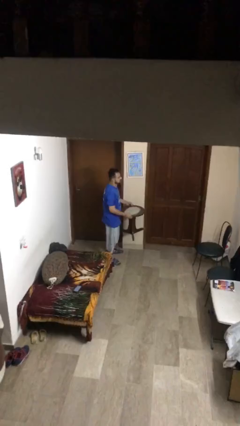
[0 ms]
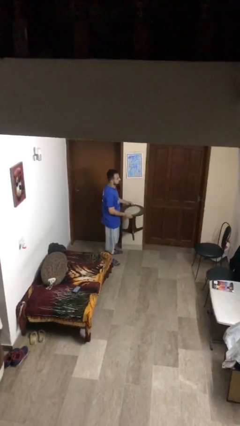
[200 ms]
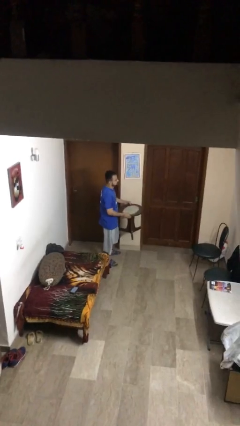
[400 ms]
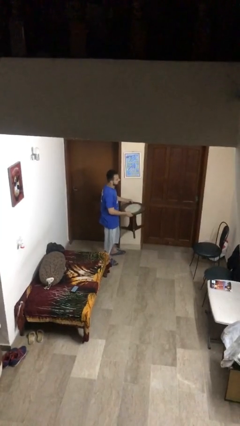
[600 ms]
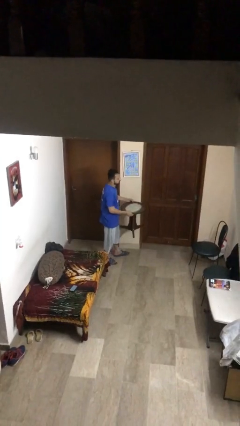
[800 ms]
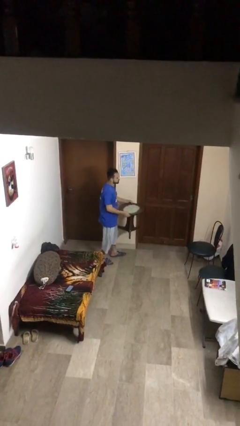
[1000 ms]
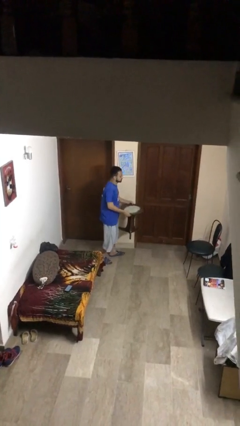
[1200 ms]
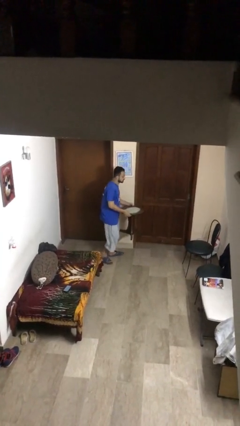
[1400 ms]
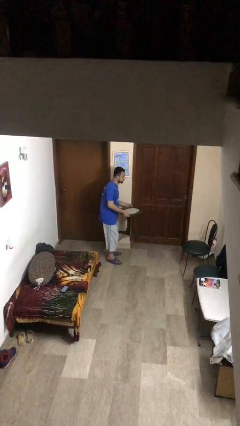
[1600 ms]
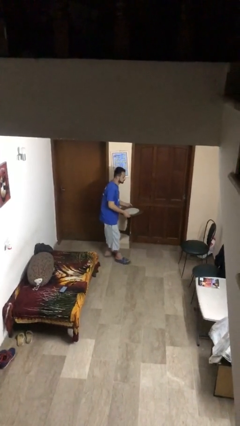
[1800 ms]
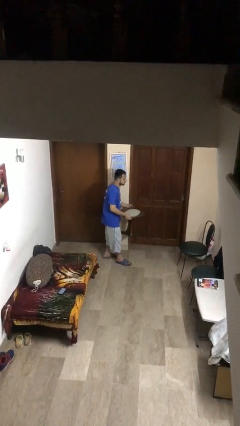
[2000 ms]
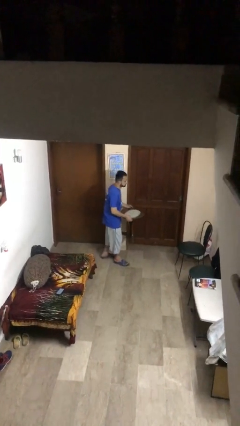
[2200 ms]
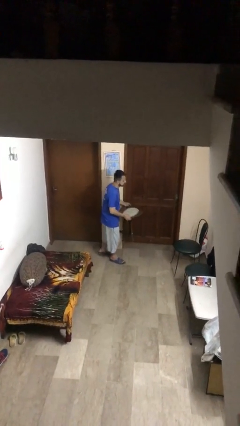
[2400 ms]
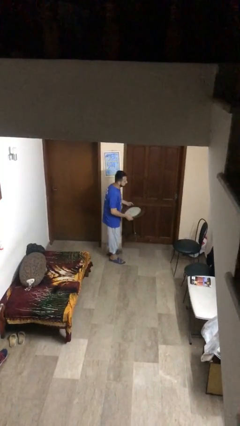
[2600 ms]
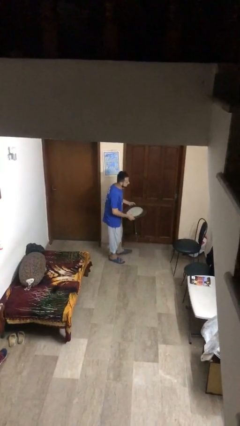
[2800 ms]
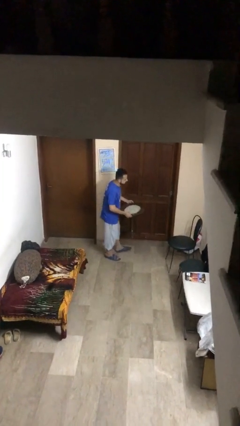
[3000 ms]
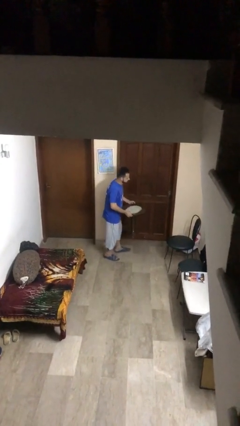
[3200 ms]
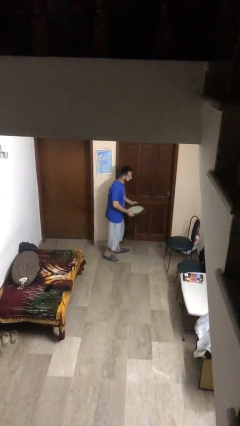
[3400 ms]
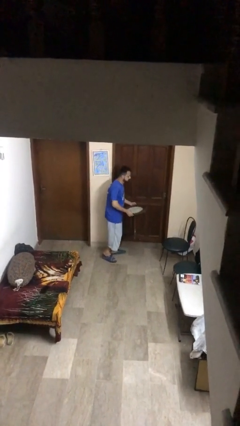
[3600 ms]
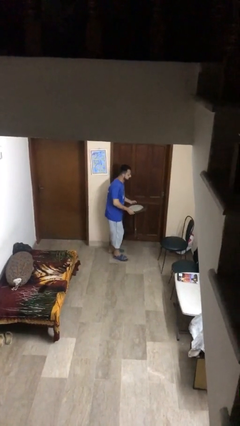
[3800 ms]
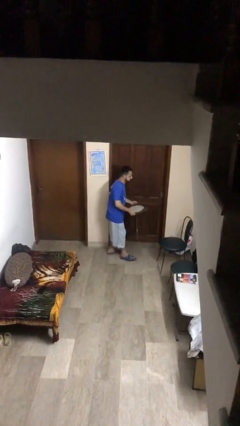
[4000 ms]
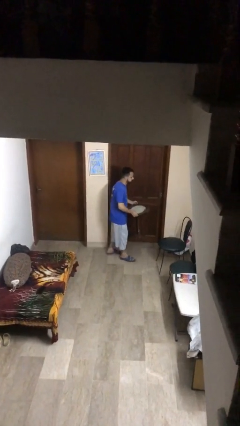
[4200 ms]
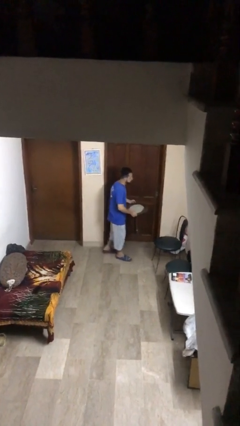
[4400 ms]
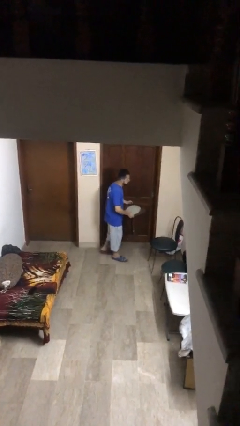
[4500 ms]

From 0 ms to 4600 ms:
person carries heavy object

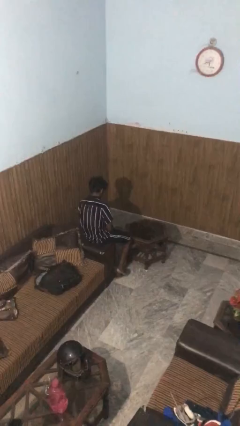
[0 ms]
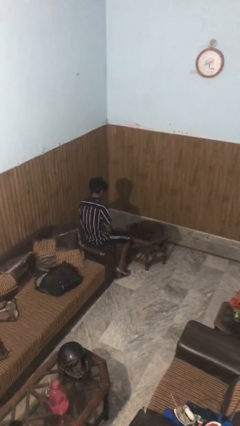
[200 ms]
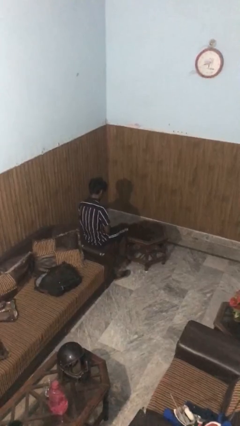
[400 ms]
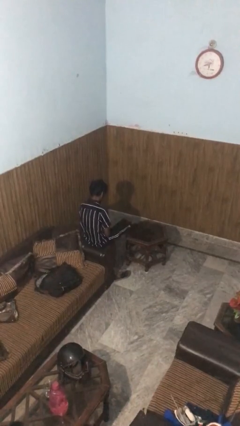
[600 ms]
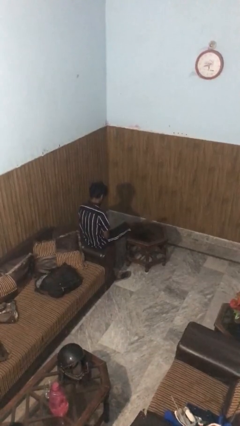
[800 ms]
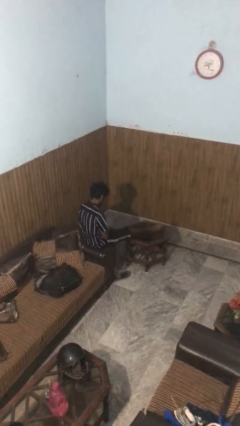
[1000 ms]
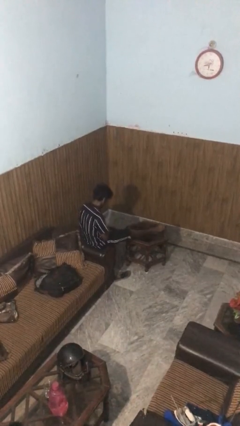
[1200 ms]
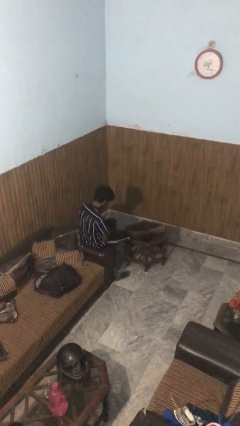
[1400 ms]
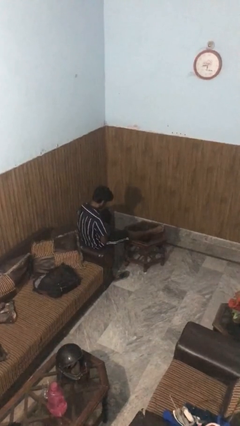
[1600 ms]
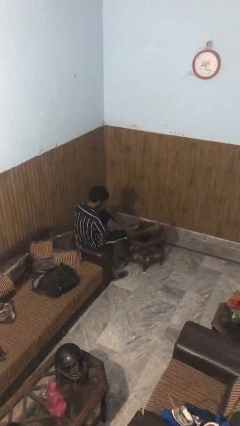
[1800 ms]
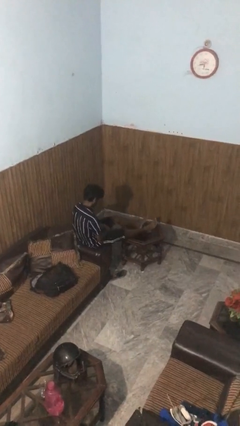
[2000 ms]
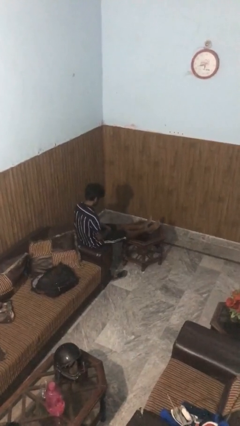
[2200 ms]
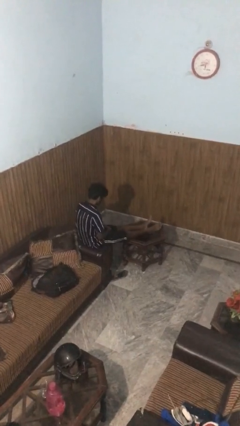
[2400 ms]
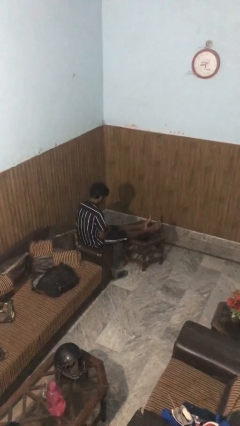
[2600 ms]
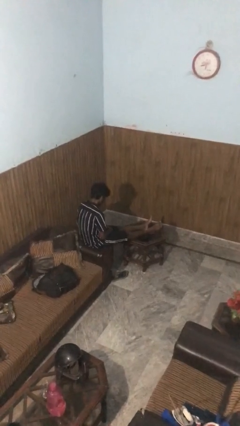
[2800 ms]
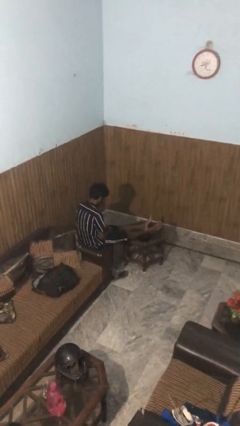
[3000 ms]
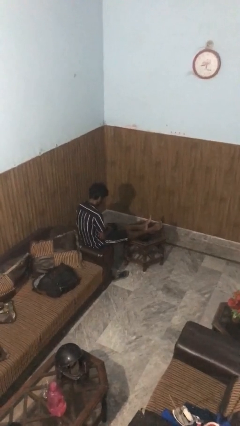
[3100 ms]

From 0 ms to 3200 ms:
person puts feet up

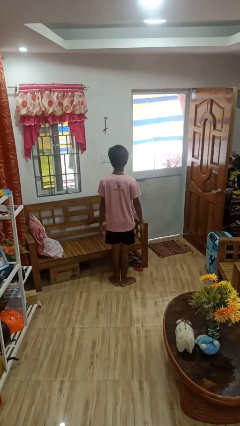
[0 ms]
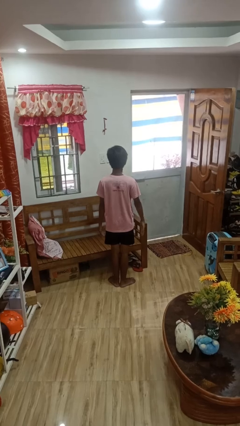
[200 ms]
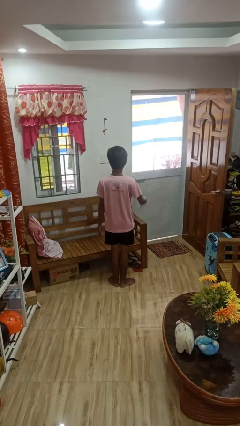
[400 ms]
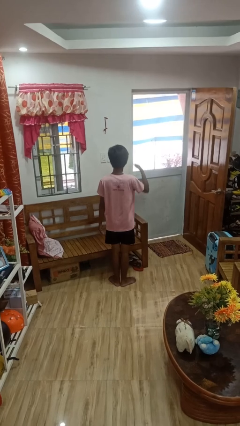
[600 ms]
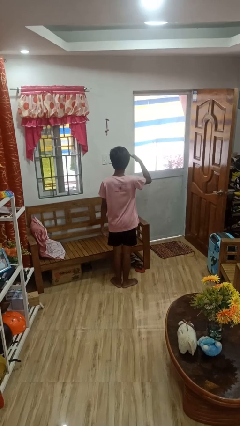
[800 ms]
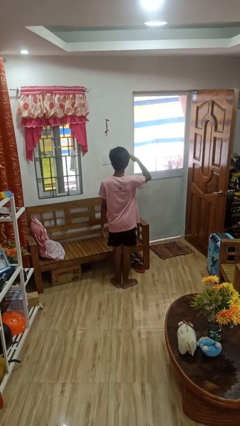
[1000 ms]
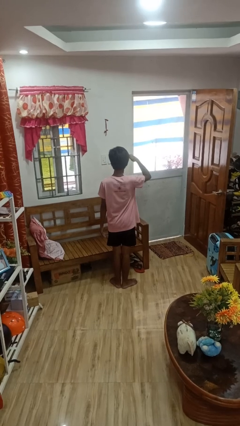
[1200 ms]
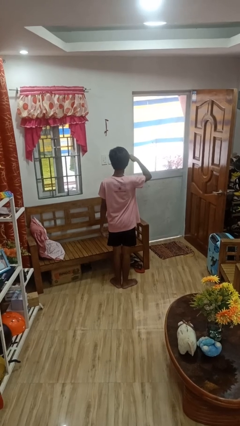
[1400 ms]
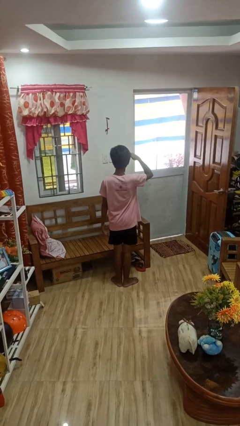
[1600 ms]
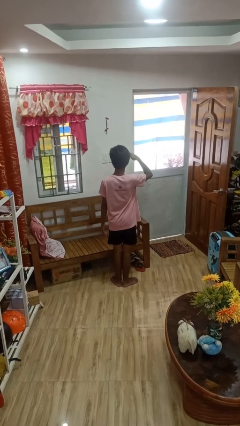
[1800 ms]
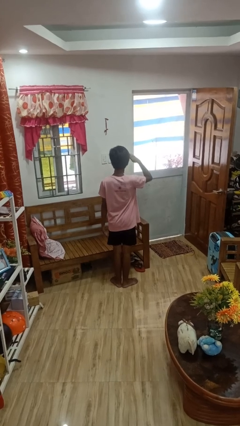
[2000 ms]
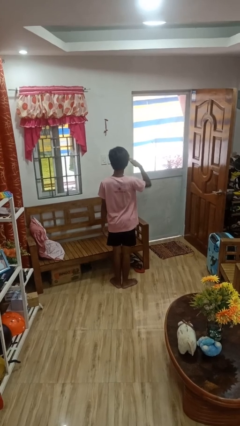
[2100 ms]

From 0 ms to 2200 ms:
person salutes

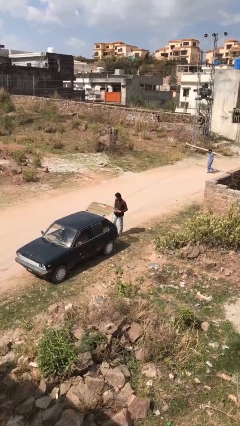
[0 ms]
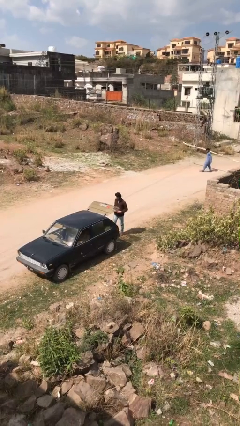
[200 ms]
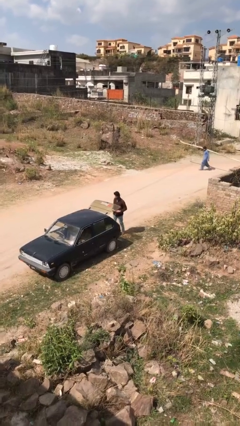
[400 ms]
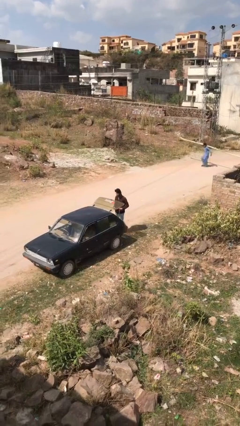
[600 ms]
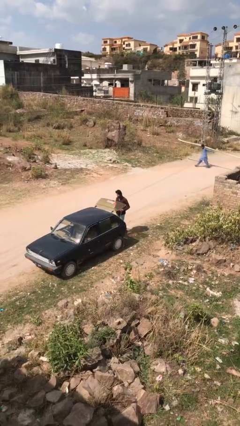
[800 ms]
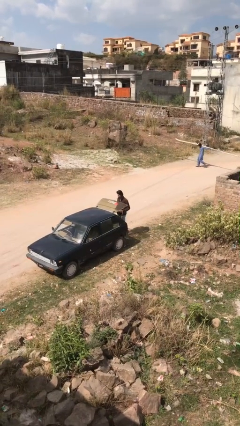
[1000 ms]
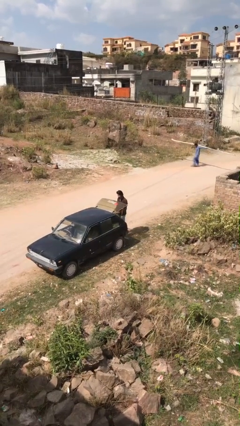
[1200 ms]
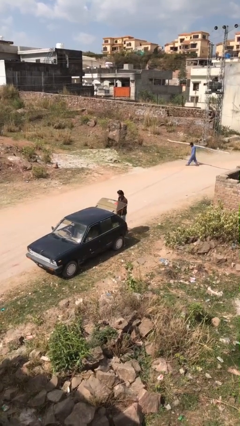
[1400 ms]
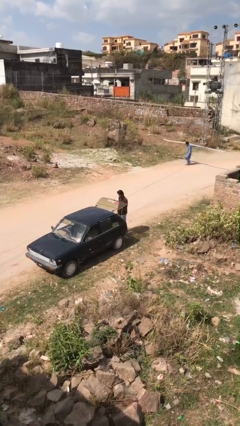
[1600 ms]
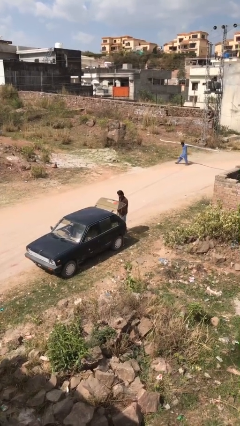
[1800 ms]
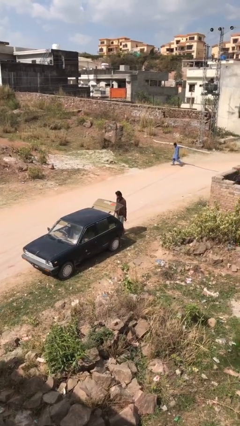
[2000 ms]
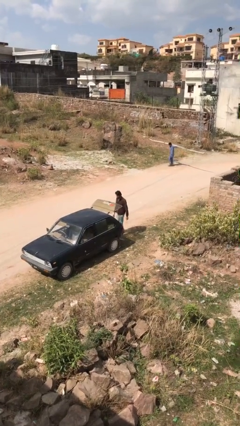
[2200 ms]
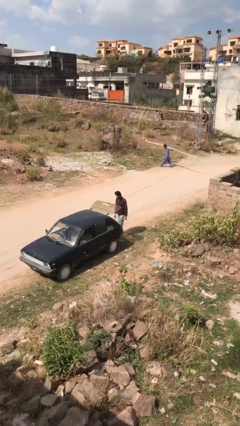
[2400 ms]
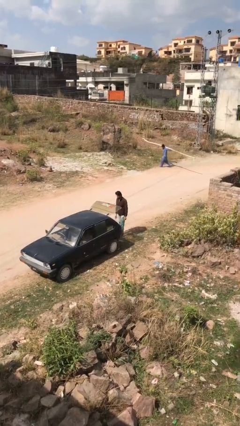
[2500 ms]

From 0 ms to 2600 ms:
person loads car

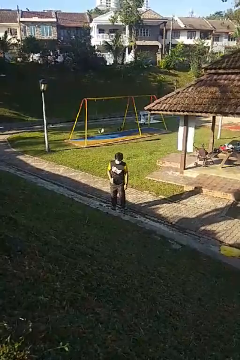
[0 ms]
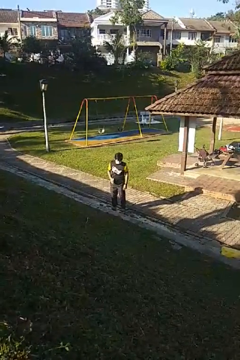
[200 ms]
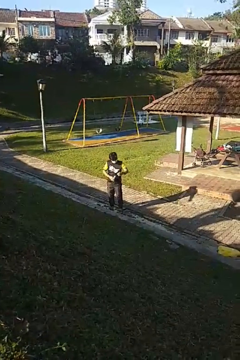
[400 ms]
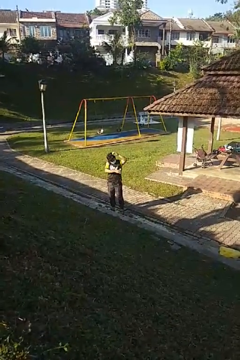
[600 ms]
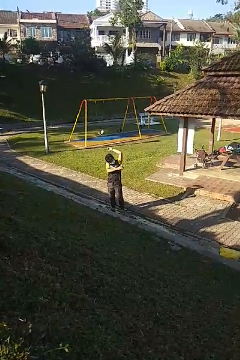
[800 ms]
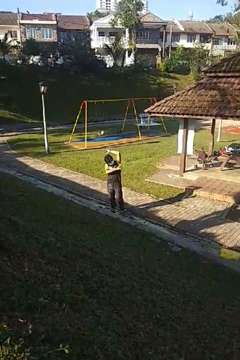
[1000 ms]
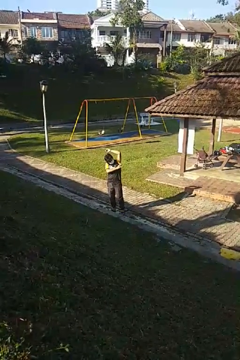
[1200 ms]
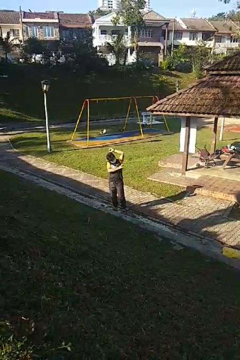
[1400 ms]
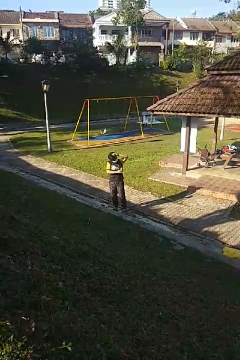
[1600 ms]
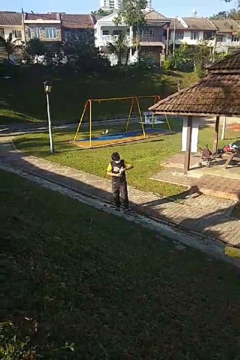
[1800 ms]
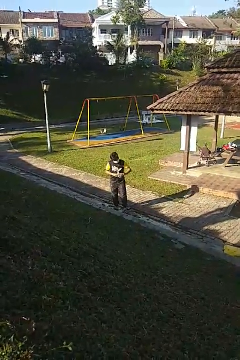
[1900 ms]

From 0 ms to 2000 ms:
person applies deodorant

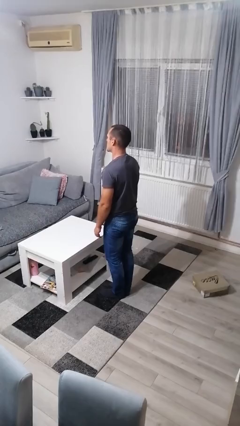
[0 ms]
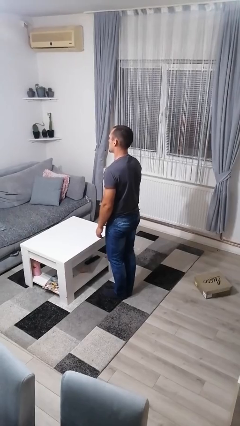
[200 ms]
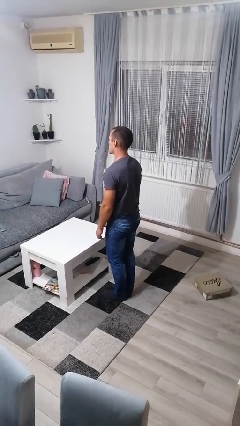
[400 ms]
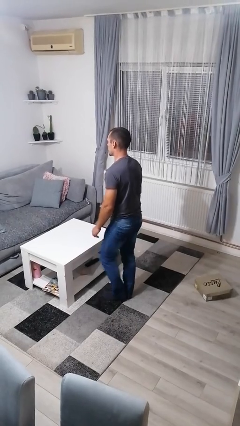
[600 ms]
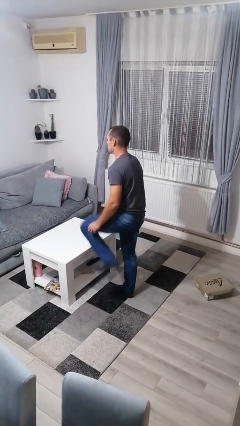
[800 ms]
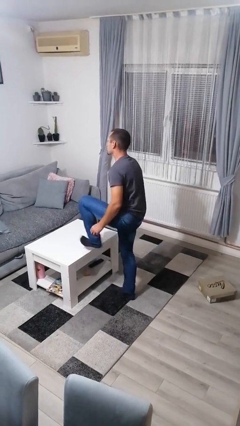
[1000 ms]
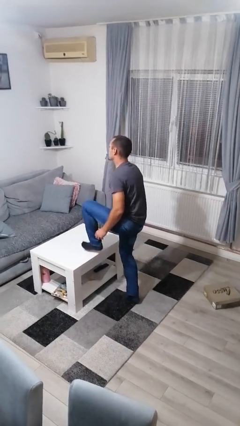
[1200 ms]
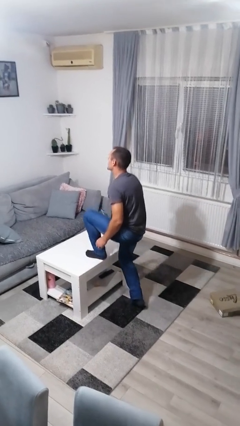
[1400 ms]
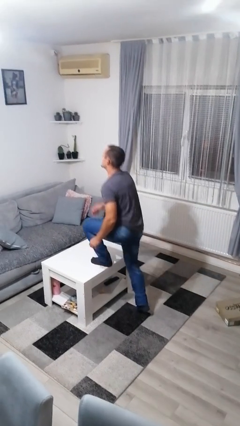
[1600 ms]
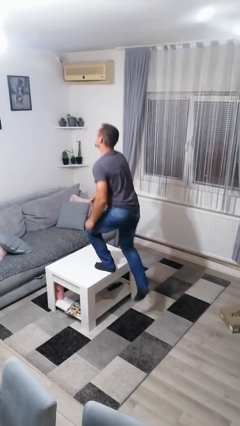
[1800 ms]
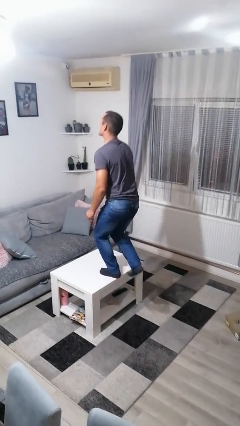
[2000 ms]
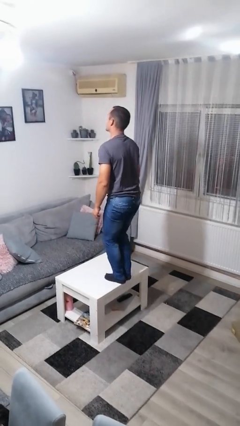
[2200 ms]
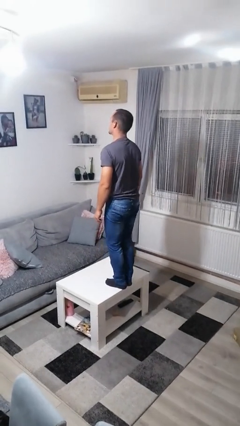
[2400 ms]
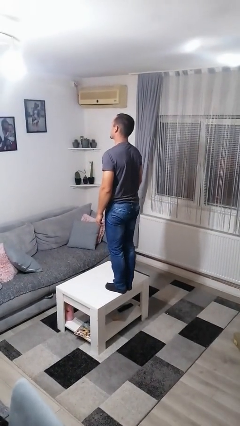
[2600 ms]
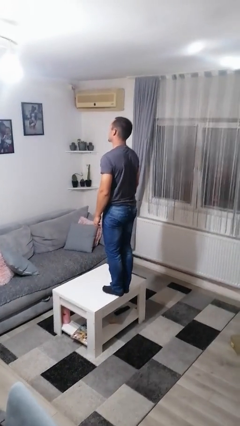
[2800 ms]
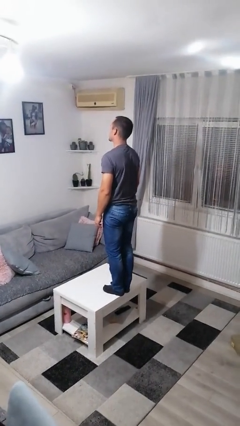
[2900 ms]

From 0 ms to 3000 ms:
person climbs on table

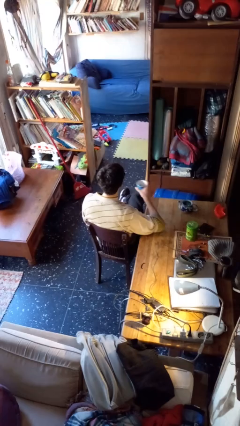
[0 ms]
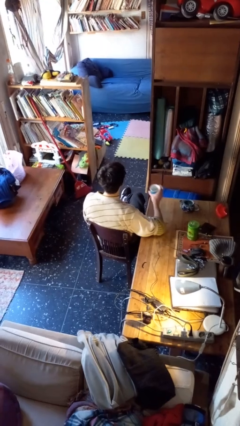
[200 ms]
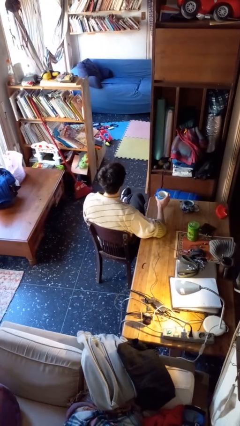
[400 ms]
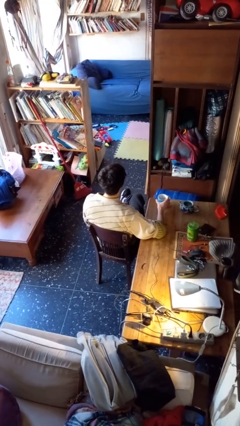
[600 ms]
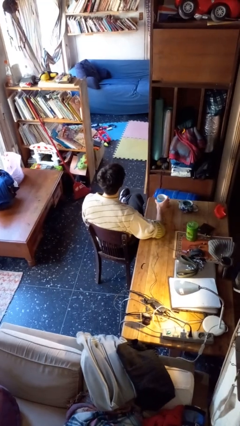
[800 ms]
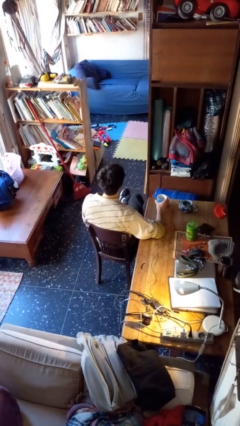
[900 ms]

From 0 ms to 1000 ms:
person puts down object on table
